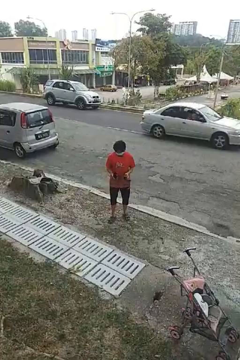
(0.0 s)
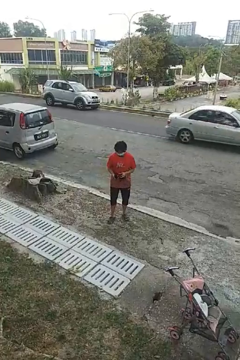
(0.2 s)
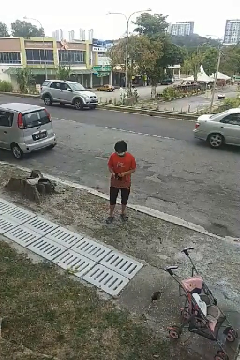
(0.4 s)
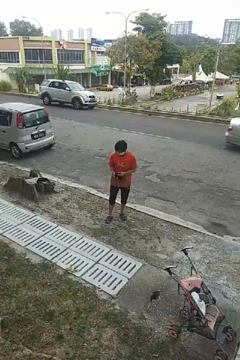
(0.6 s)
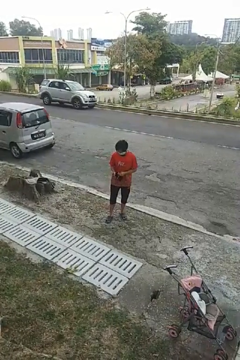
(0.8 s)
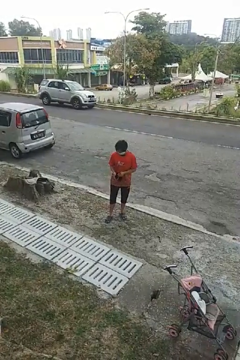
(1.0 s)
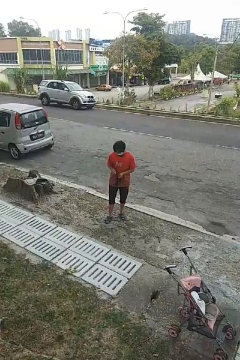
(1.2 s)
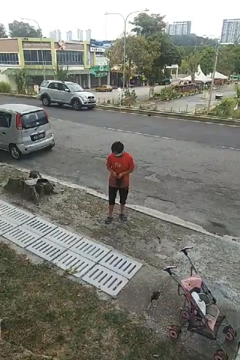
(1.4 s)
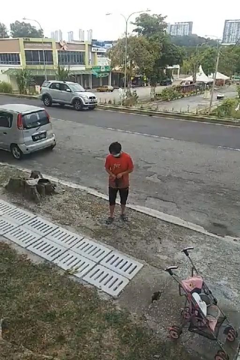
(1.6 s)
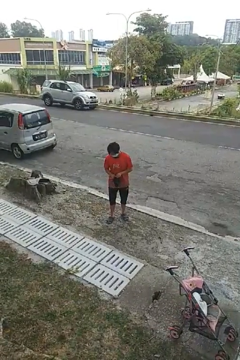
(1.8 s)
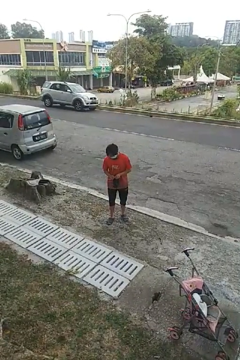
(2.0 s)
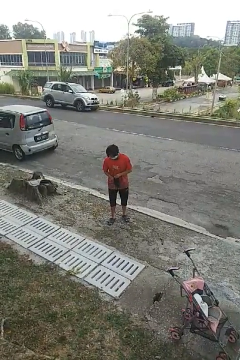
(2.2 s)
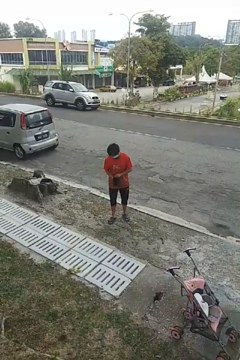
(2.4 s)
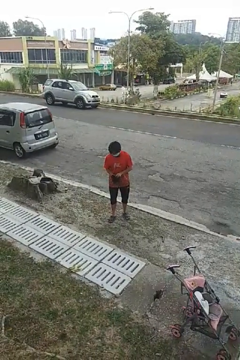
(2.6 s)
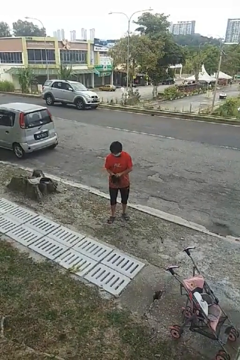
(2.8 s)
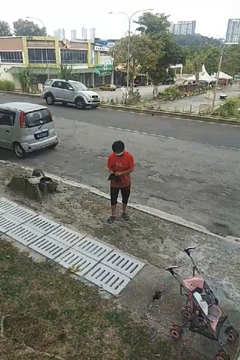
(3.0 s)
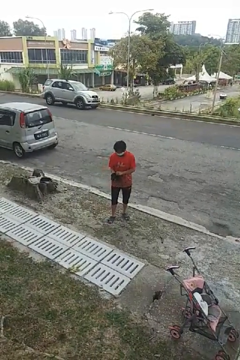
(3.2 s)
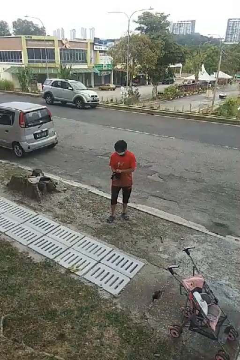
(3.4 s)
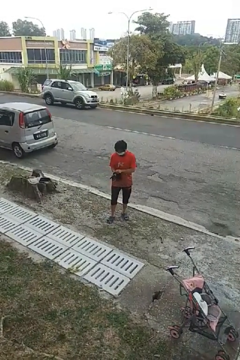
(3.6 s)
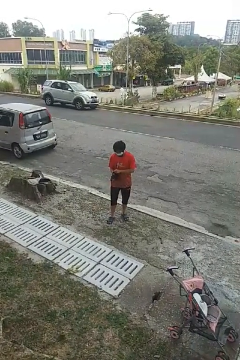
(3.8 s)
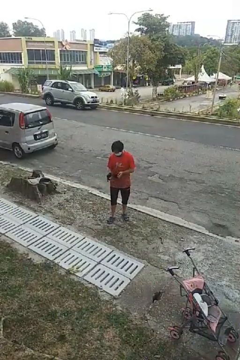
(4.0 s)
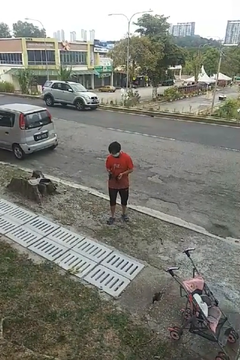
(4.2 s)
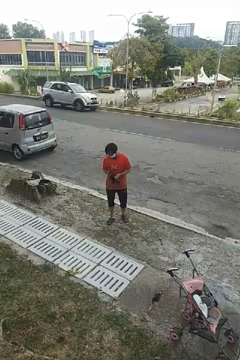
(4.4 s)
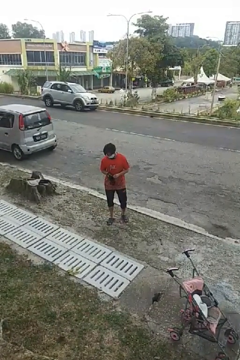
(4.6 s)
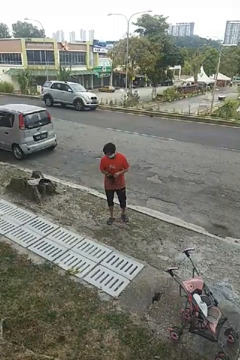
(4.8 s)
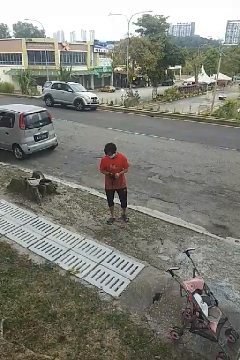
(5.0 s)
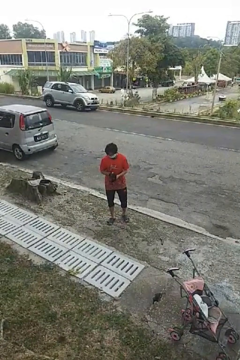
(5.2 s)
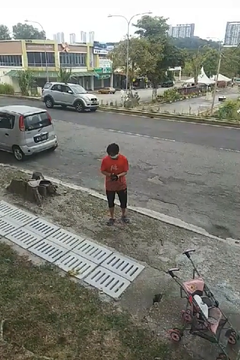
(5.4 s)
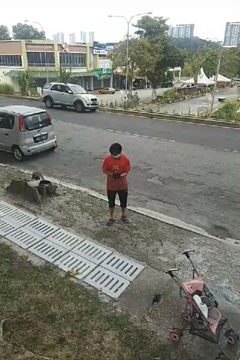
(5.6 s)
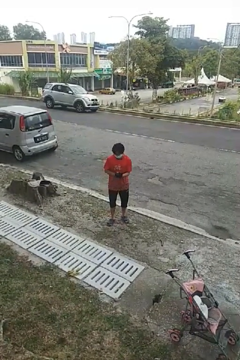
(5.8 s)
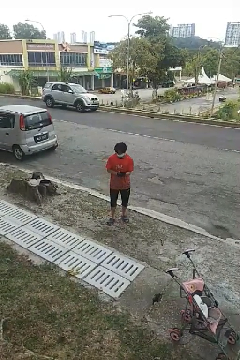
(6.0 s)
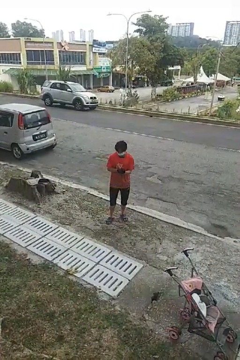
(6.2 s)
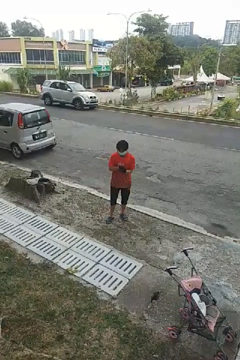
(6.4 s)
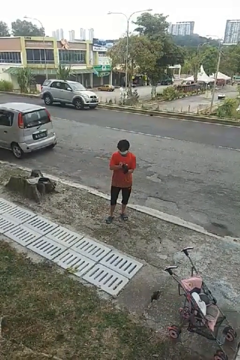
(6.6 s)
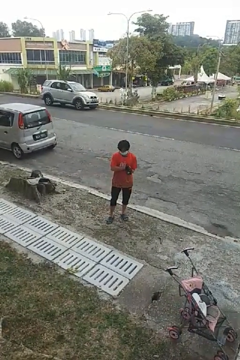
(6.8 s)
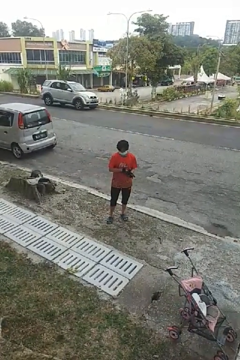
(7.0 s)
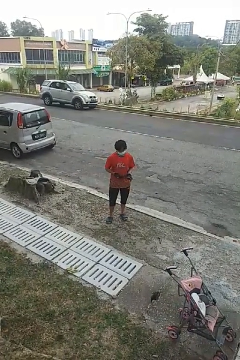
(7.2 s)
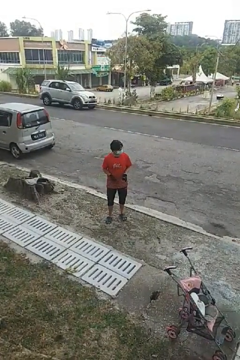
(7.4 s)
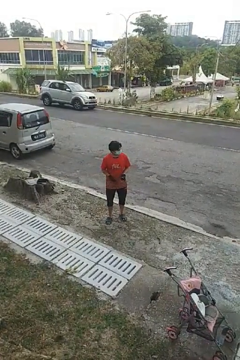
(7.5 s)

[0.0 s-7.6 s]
person puts on gloves

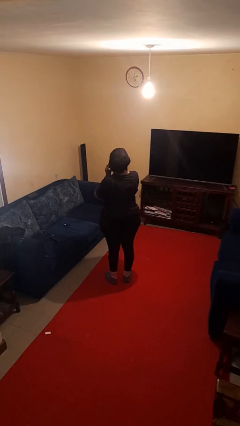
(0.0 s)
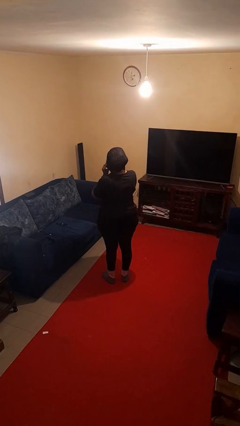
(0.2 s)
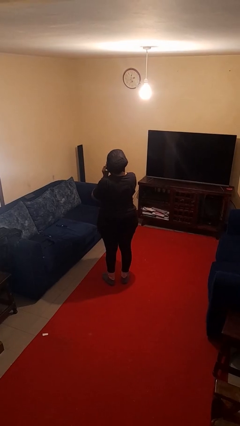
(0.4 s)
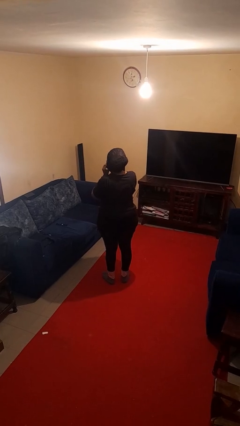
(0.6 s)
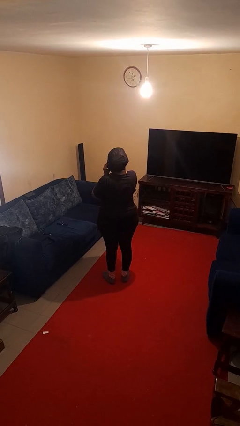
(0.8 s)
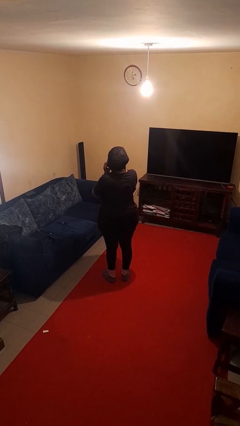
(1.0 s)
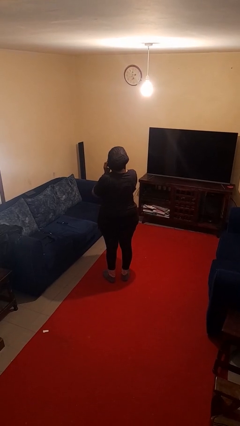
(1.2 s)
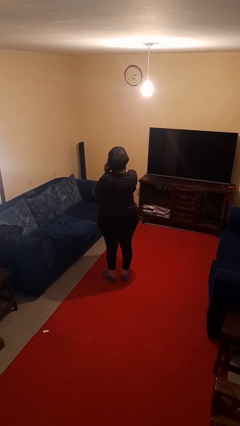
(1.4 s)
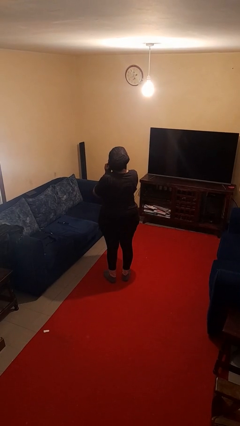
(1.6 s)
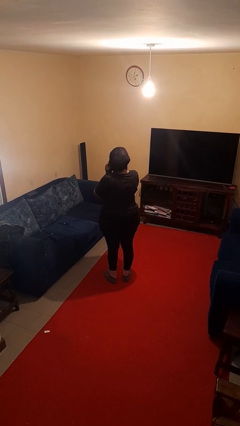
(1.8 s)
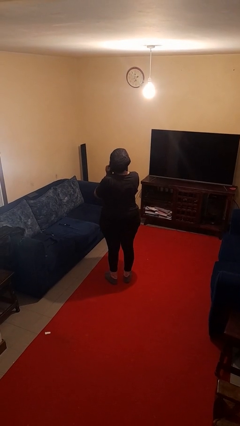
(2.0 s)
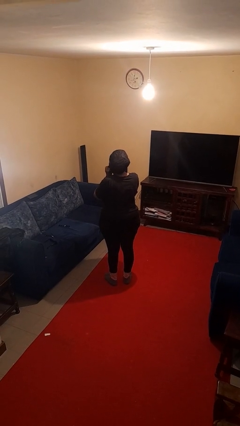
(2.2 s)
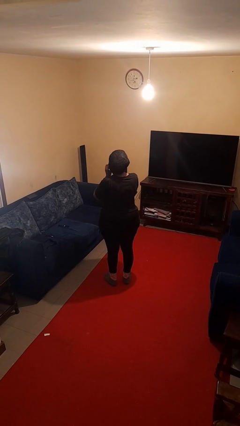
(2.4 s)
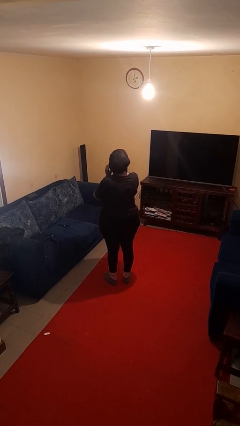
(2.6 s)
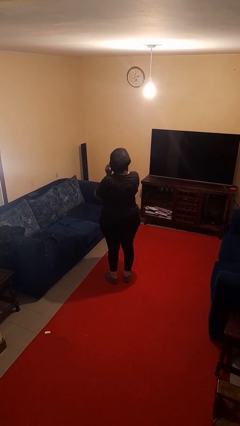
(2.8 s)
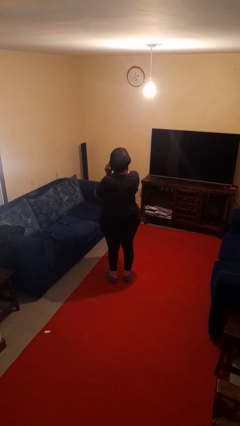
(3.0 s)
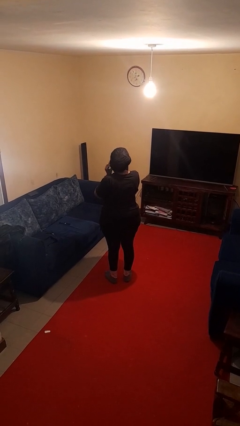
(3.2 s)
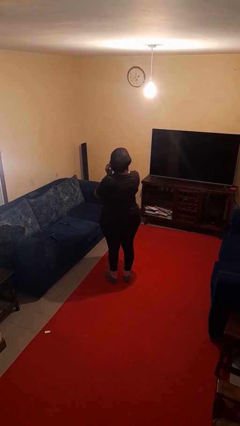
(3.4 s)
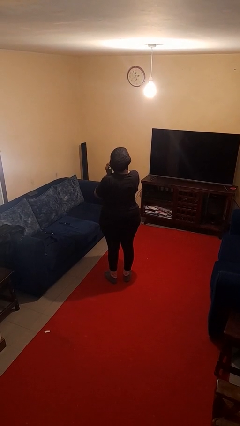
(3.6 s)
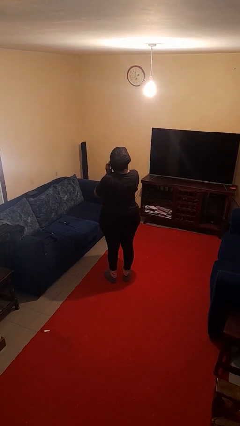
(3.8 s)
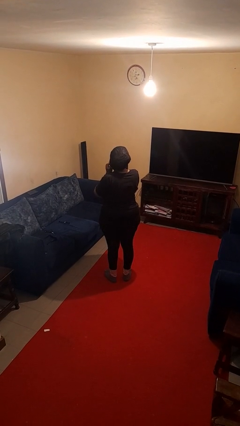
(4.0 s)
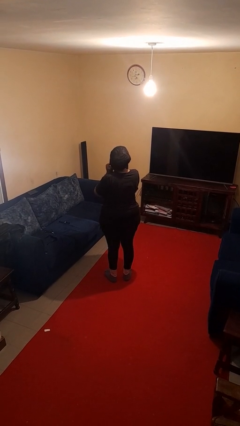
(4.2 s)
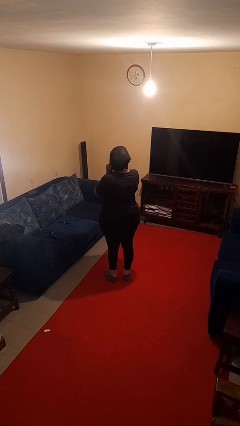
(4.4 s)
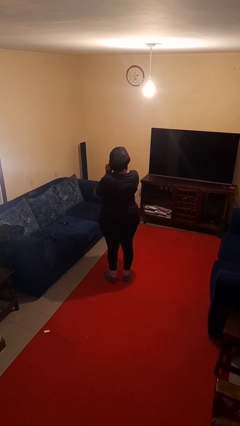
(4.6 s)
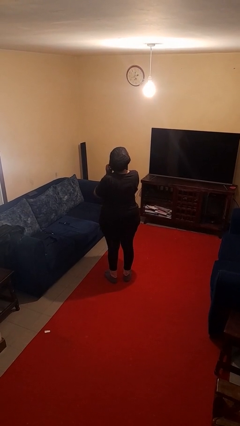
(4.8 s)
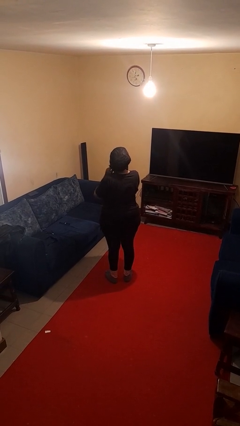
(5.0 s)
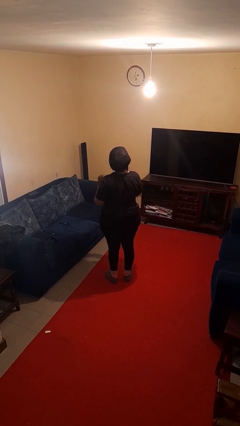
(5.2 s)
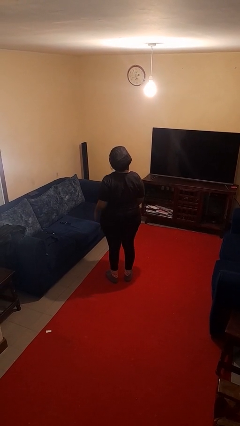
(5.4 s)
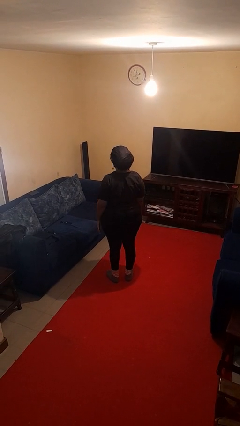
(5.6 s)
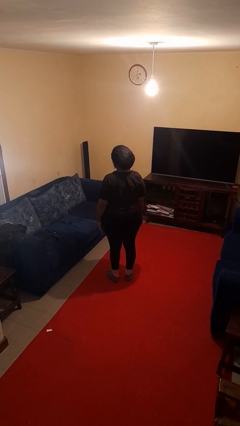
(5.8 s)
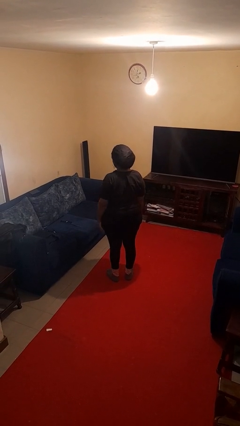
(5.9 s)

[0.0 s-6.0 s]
person puts on earrings

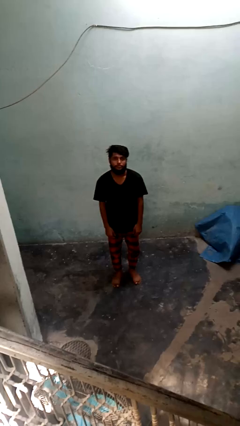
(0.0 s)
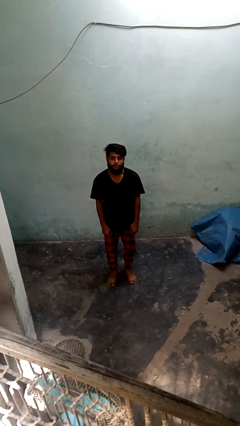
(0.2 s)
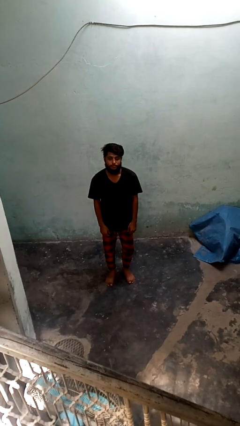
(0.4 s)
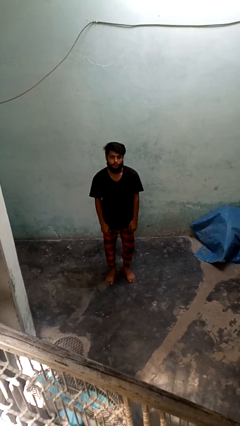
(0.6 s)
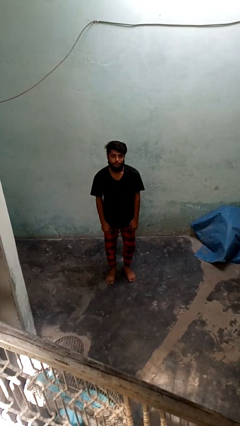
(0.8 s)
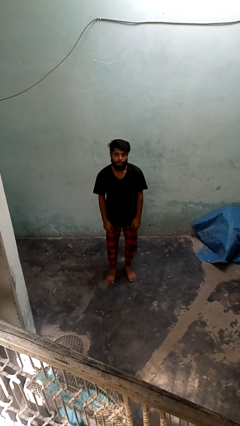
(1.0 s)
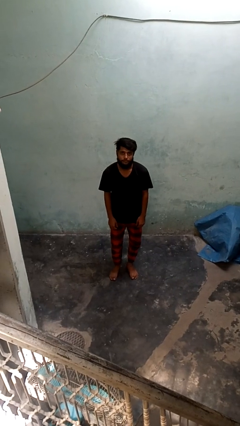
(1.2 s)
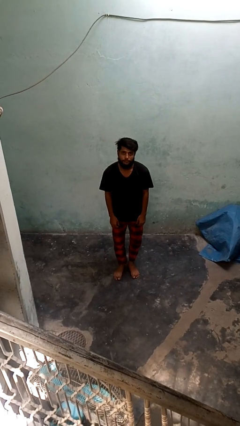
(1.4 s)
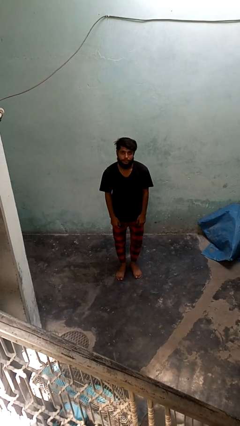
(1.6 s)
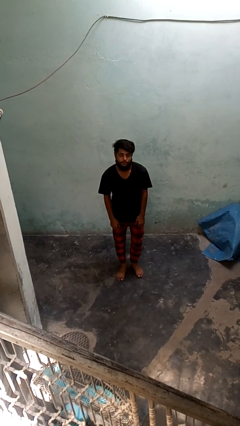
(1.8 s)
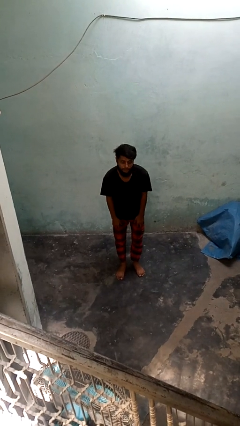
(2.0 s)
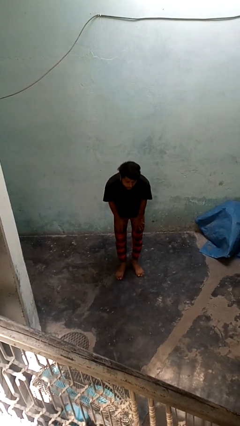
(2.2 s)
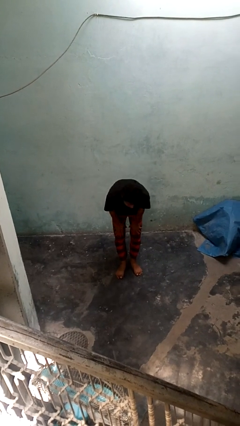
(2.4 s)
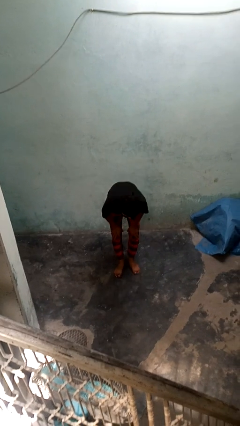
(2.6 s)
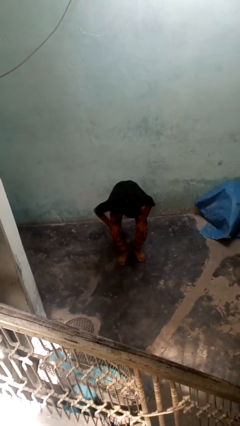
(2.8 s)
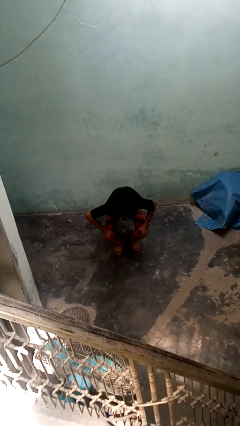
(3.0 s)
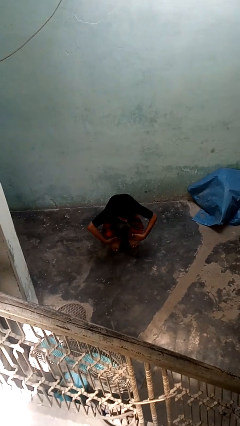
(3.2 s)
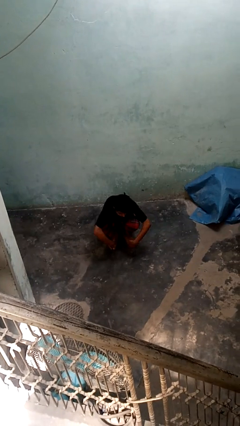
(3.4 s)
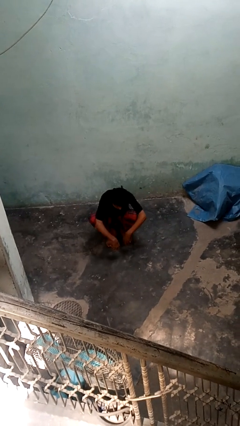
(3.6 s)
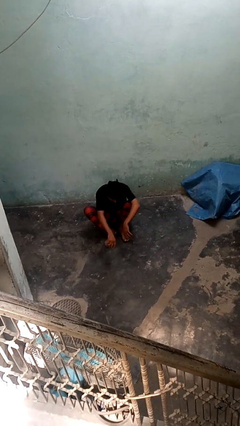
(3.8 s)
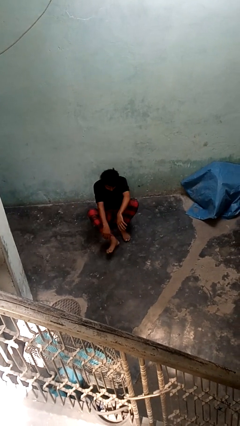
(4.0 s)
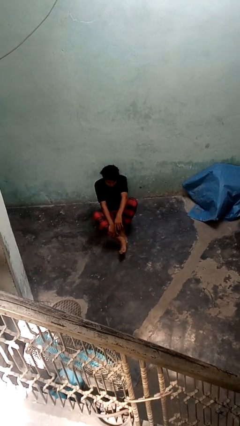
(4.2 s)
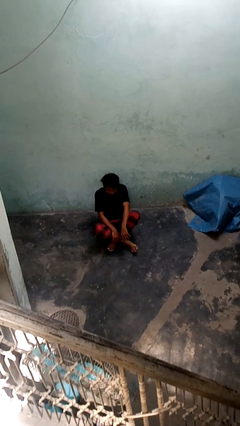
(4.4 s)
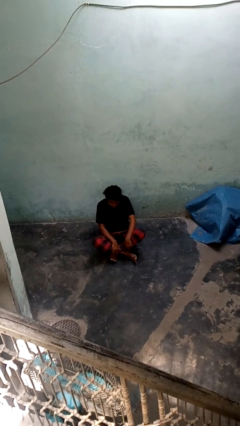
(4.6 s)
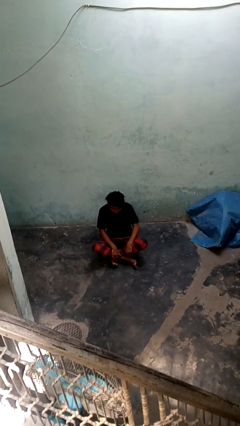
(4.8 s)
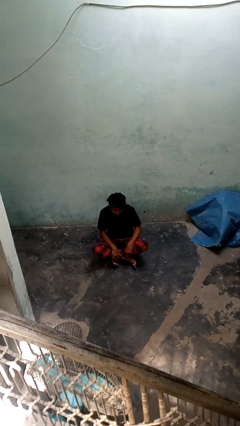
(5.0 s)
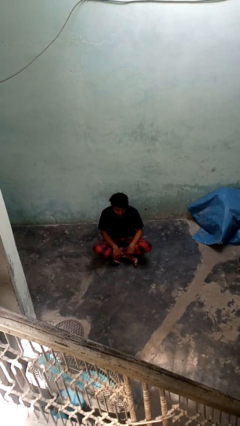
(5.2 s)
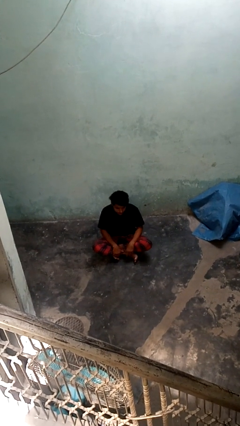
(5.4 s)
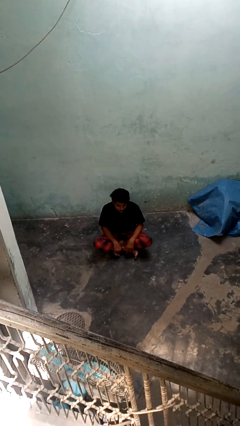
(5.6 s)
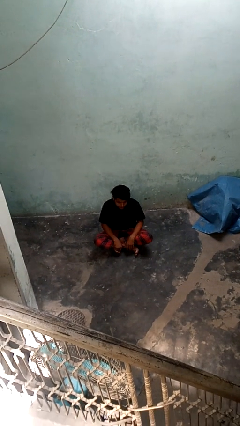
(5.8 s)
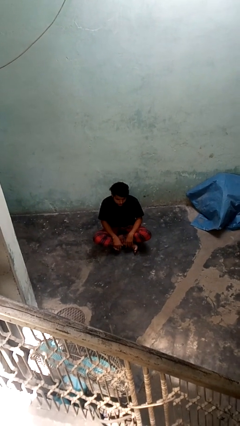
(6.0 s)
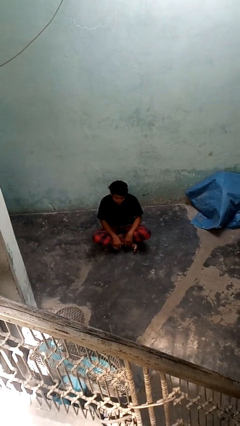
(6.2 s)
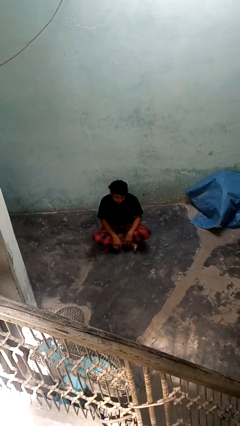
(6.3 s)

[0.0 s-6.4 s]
person sits crisscross
